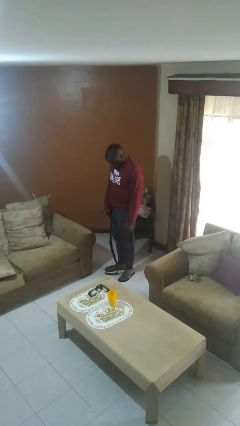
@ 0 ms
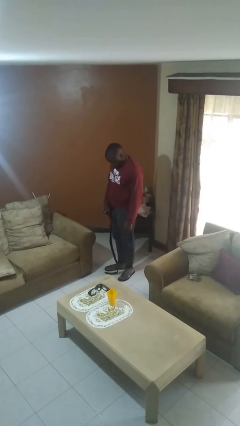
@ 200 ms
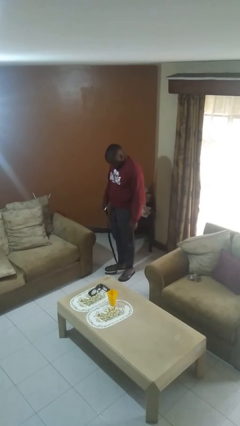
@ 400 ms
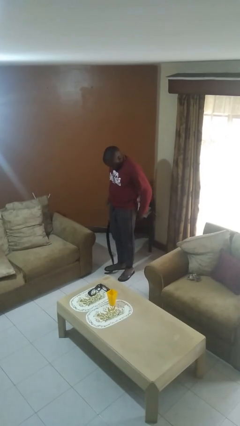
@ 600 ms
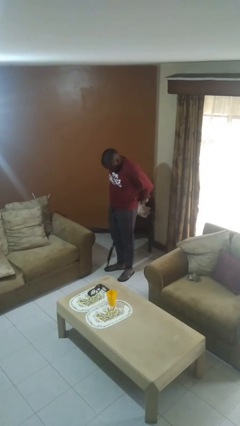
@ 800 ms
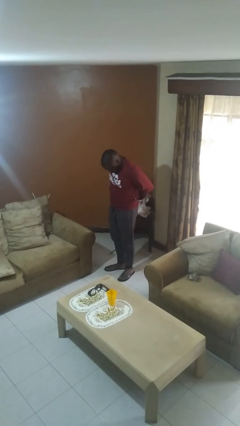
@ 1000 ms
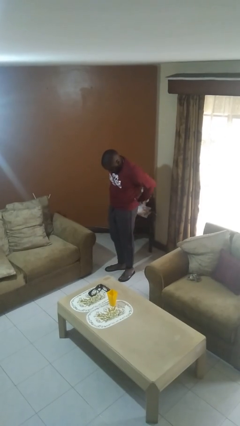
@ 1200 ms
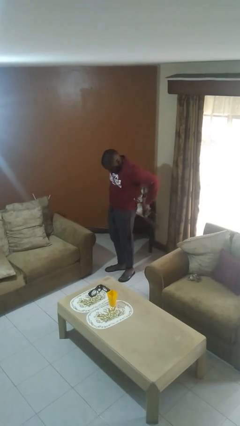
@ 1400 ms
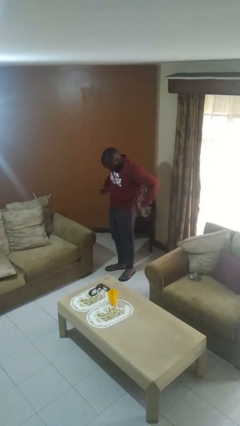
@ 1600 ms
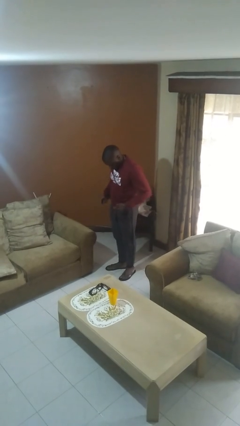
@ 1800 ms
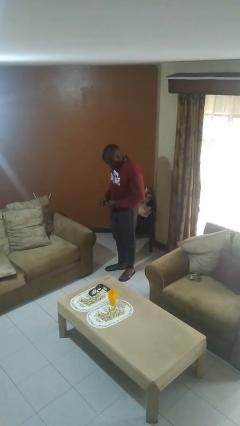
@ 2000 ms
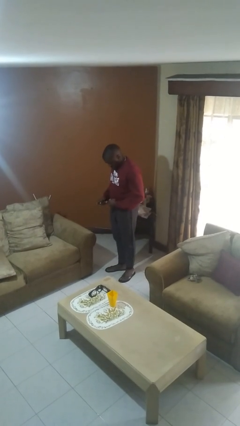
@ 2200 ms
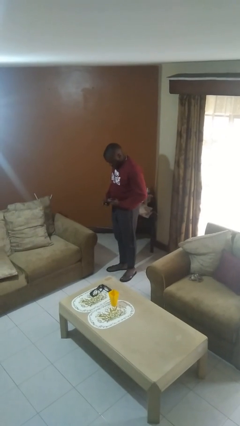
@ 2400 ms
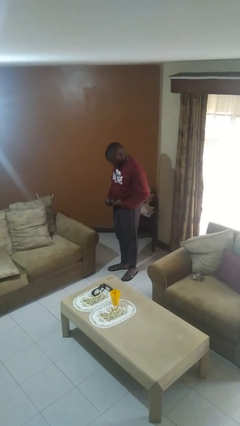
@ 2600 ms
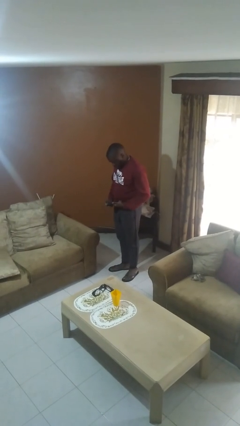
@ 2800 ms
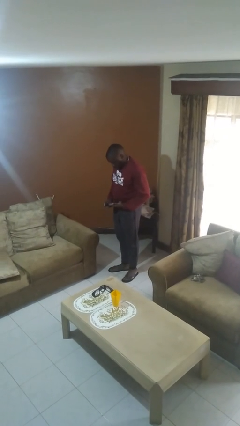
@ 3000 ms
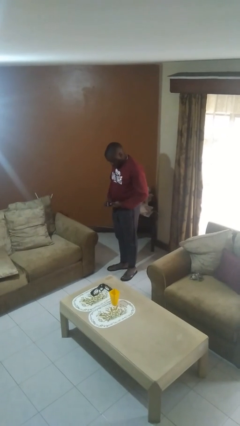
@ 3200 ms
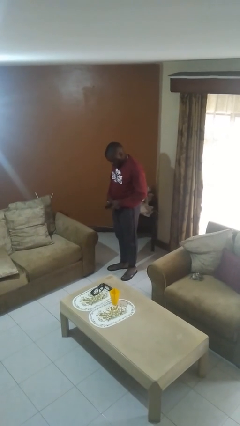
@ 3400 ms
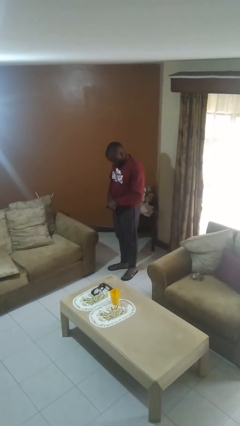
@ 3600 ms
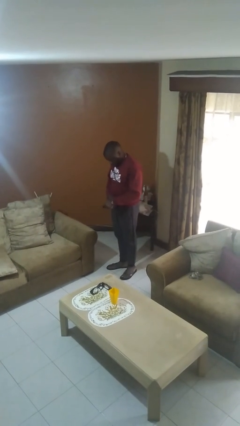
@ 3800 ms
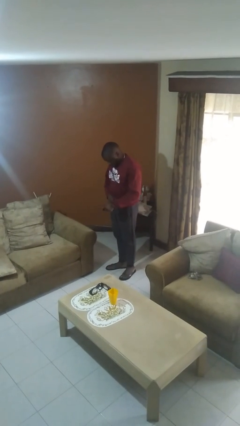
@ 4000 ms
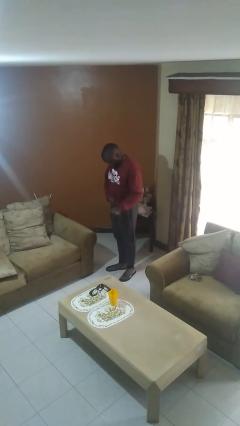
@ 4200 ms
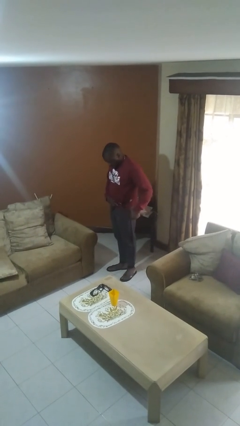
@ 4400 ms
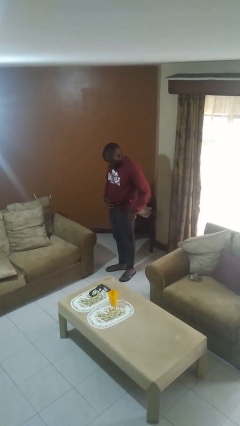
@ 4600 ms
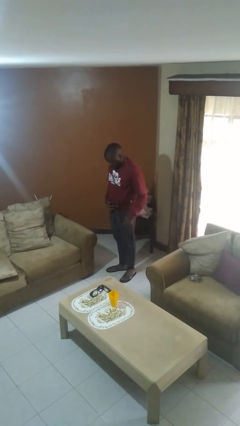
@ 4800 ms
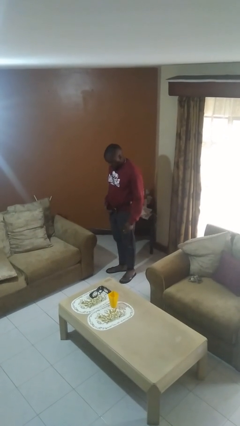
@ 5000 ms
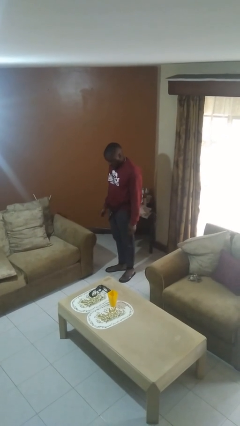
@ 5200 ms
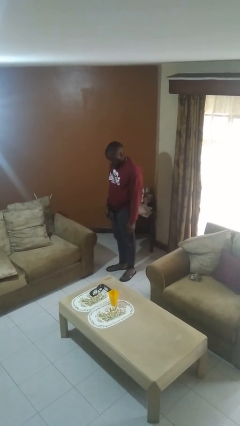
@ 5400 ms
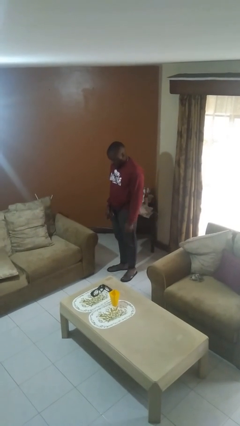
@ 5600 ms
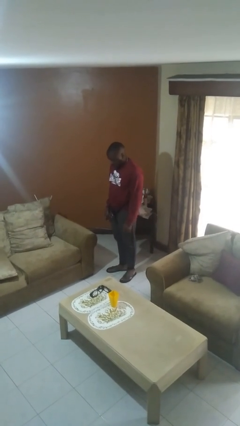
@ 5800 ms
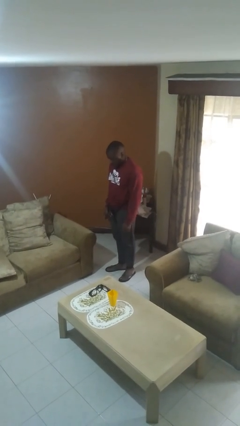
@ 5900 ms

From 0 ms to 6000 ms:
person puts on belt

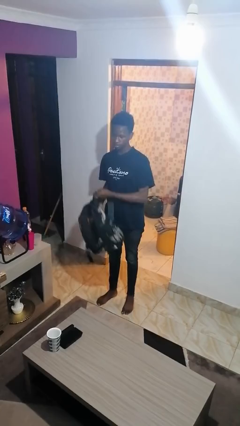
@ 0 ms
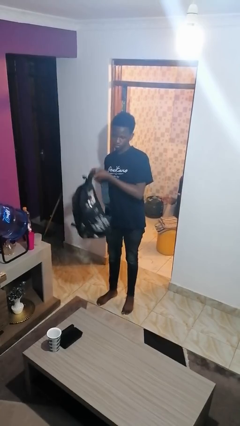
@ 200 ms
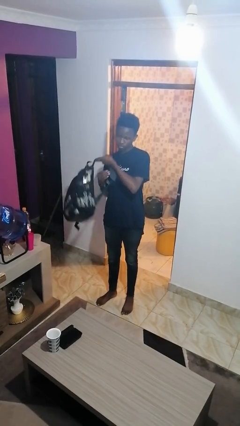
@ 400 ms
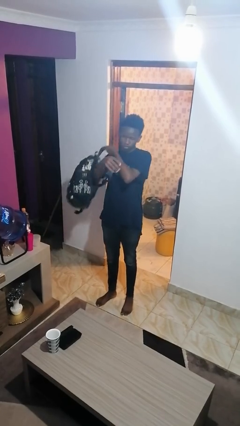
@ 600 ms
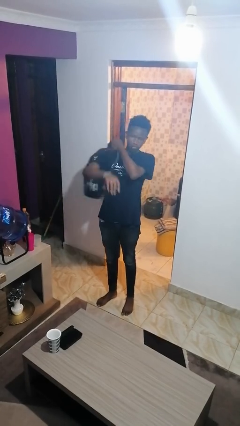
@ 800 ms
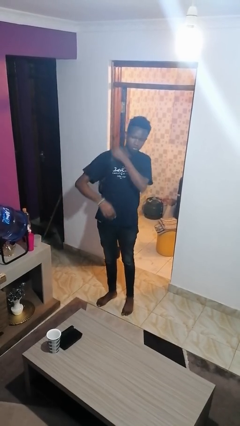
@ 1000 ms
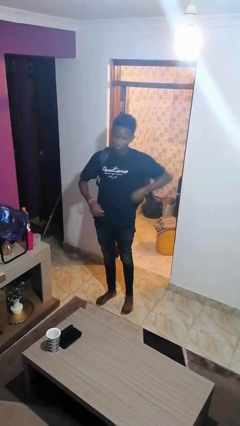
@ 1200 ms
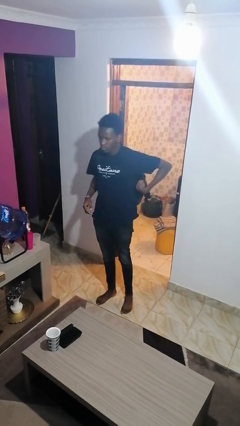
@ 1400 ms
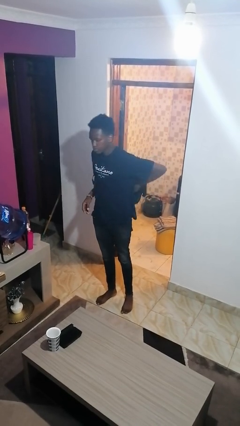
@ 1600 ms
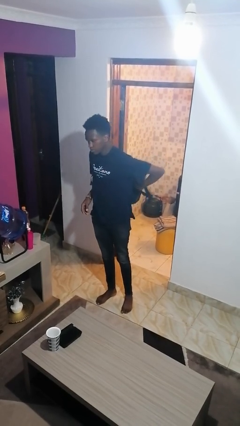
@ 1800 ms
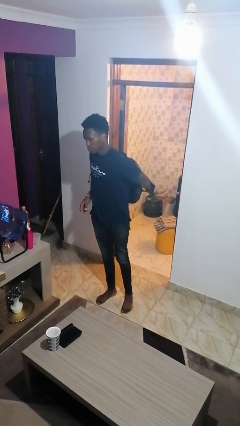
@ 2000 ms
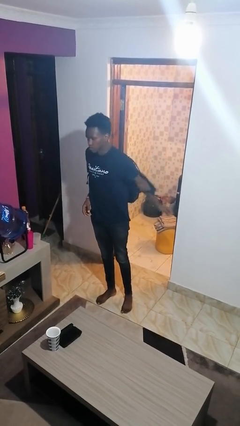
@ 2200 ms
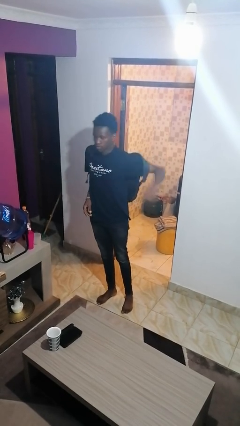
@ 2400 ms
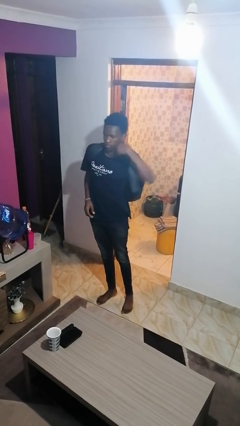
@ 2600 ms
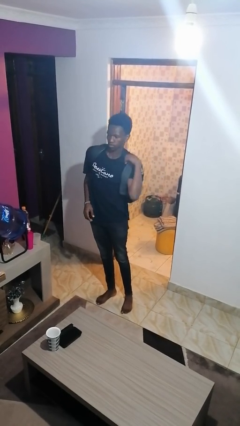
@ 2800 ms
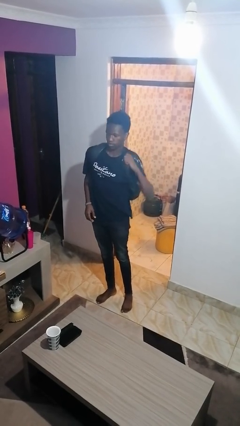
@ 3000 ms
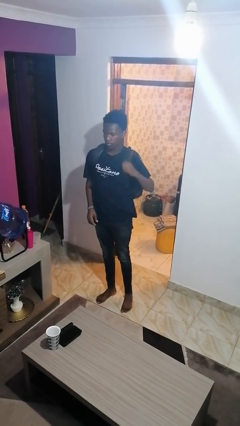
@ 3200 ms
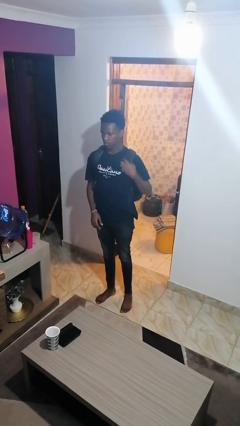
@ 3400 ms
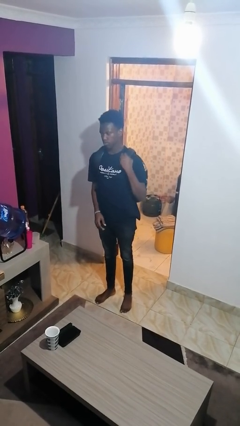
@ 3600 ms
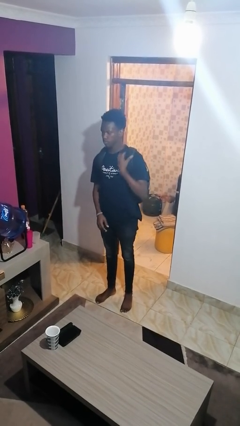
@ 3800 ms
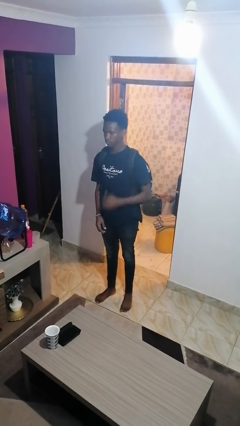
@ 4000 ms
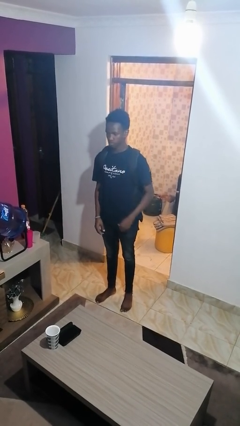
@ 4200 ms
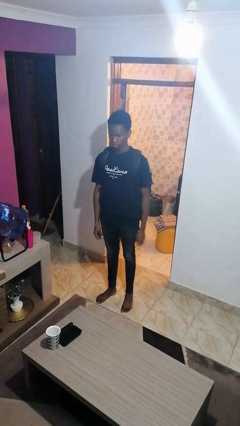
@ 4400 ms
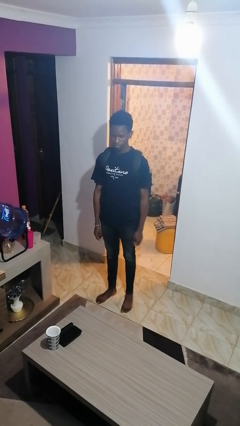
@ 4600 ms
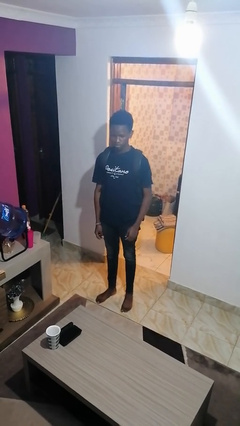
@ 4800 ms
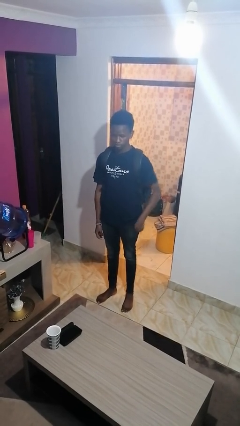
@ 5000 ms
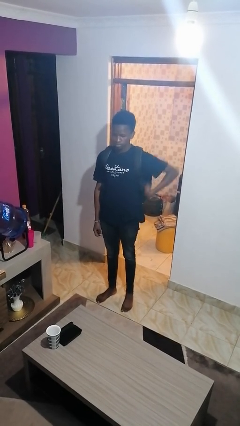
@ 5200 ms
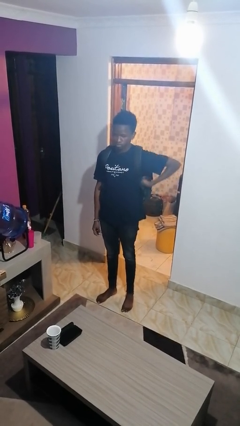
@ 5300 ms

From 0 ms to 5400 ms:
person puts on backpack

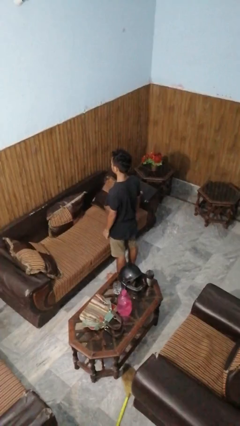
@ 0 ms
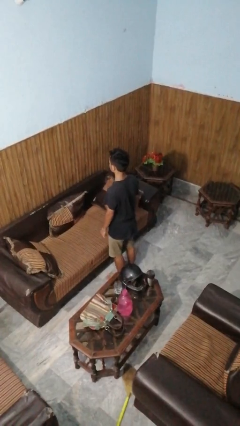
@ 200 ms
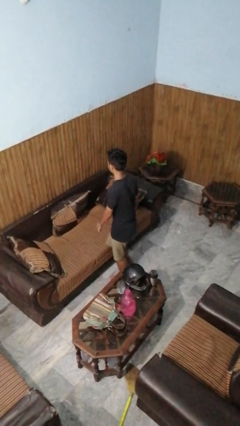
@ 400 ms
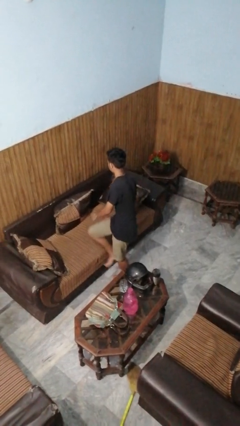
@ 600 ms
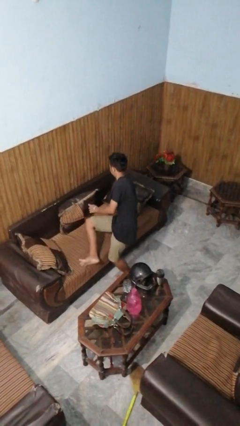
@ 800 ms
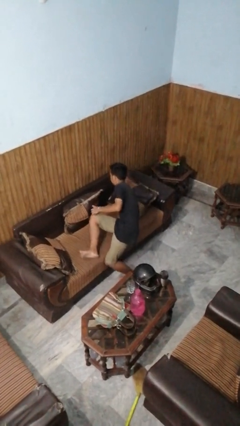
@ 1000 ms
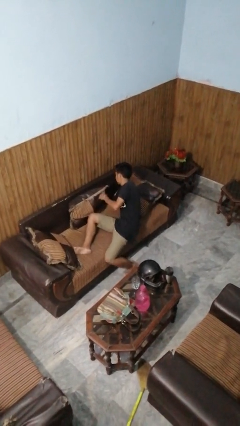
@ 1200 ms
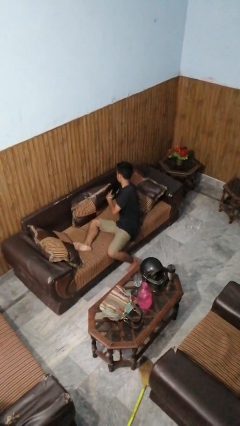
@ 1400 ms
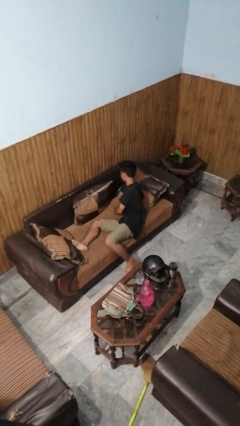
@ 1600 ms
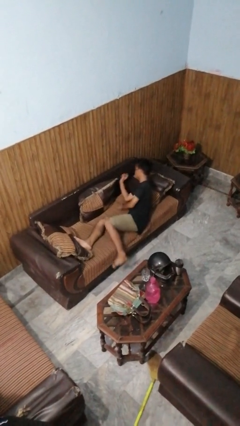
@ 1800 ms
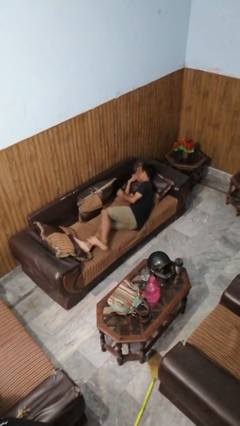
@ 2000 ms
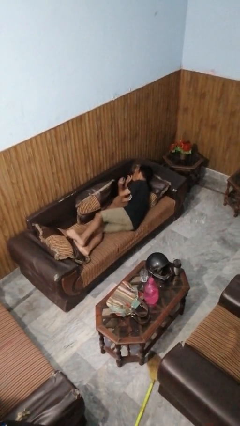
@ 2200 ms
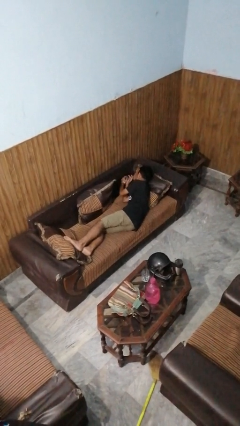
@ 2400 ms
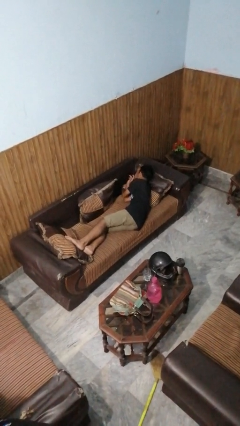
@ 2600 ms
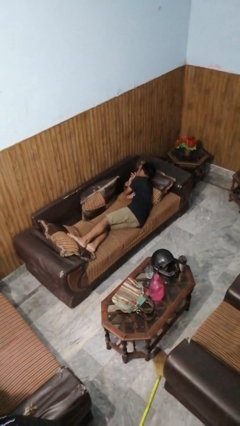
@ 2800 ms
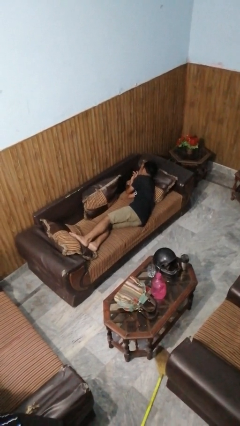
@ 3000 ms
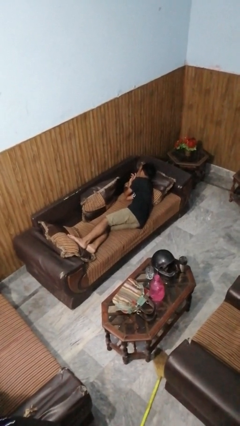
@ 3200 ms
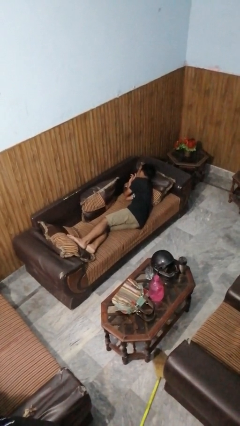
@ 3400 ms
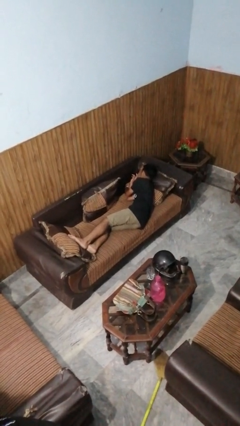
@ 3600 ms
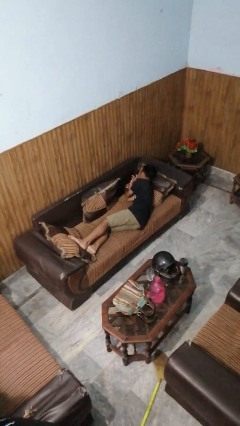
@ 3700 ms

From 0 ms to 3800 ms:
person lies down on couch

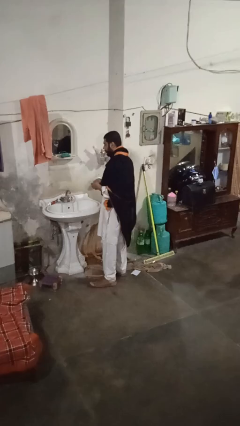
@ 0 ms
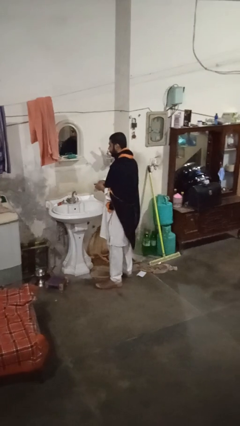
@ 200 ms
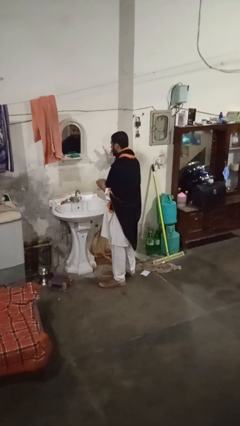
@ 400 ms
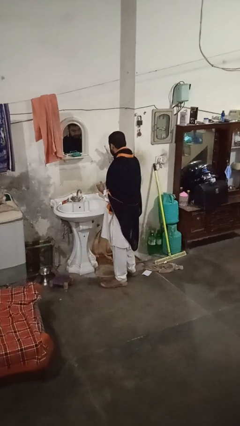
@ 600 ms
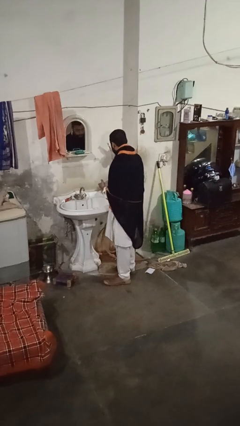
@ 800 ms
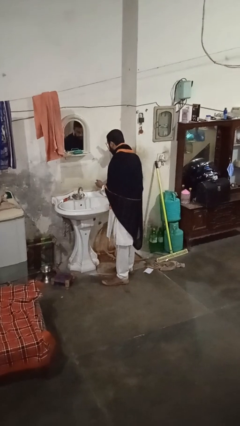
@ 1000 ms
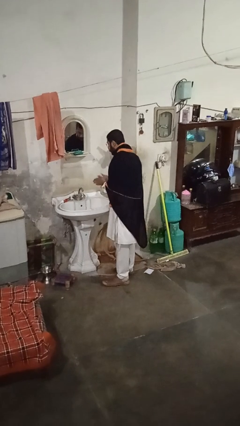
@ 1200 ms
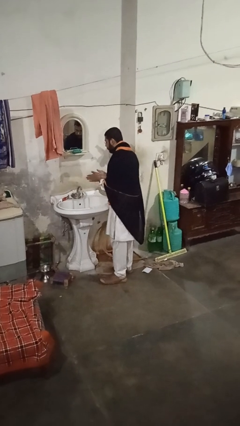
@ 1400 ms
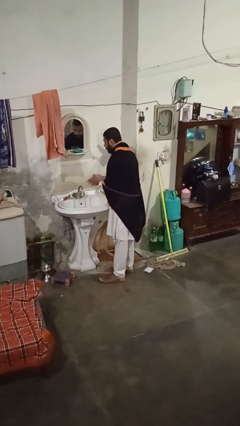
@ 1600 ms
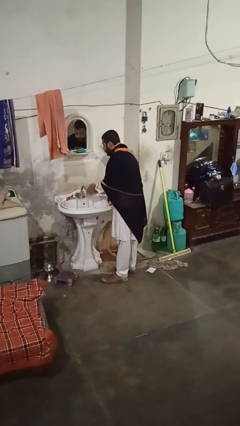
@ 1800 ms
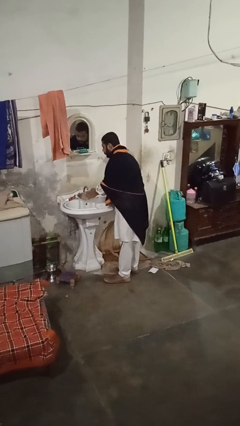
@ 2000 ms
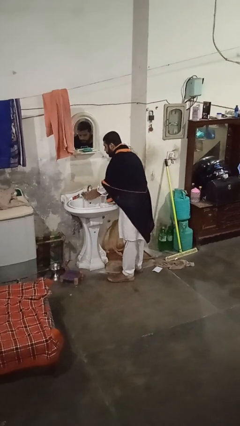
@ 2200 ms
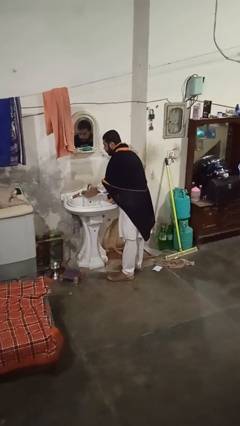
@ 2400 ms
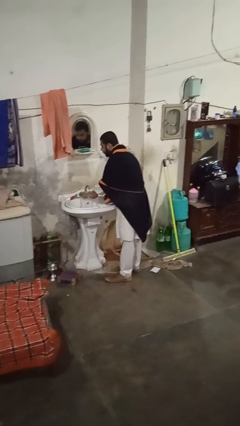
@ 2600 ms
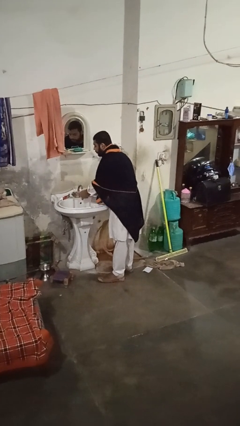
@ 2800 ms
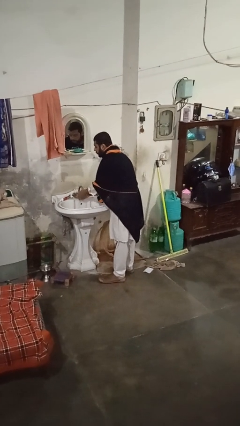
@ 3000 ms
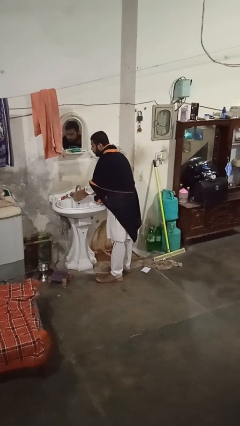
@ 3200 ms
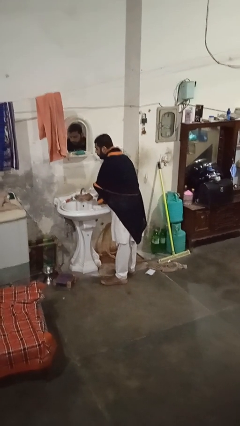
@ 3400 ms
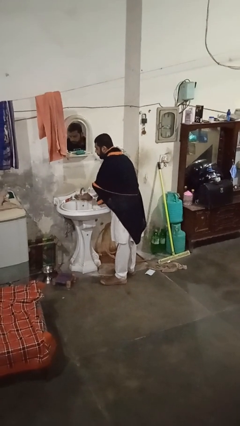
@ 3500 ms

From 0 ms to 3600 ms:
person washes hands
